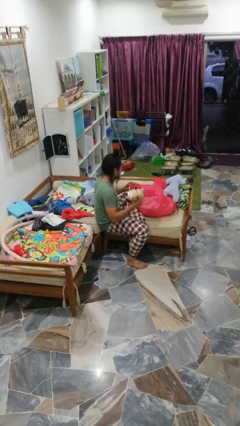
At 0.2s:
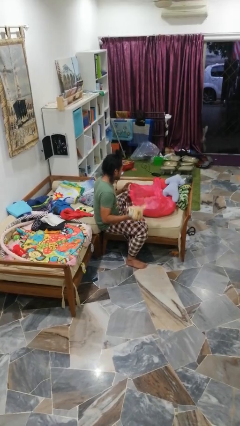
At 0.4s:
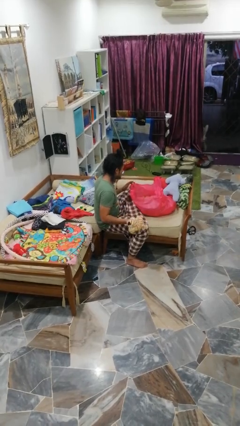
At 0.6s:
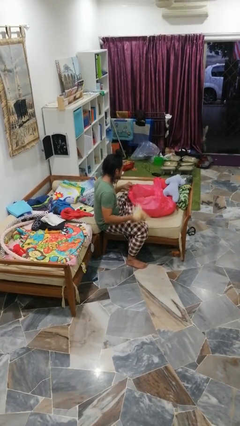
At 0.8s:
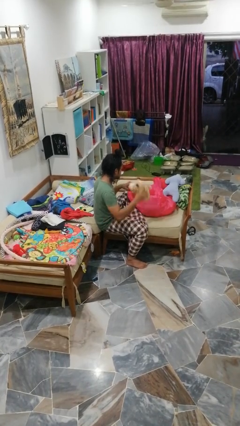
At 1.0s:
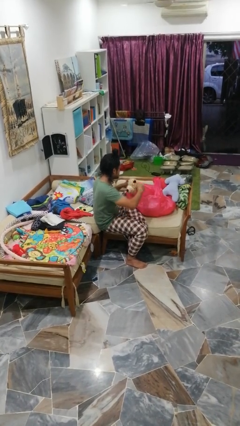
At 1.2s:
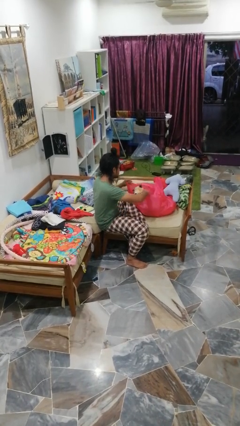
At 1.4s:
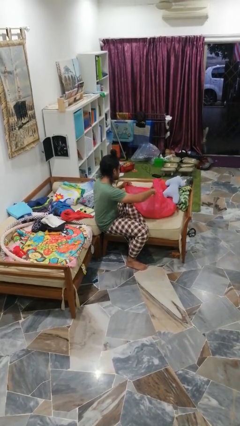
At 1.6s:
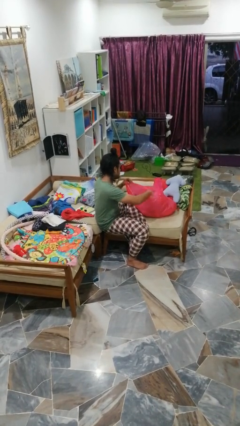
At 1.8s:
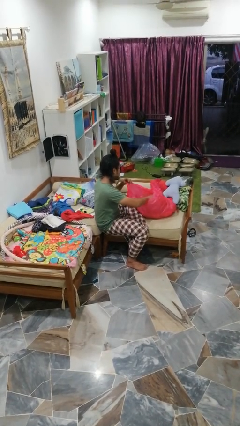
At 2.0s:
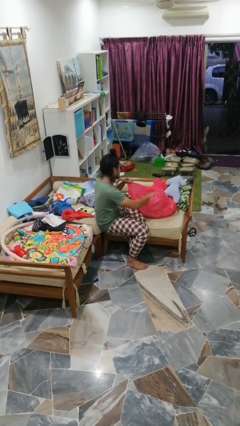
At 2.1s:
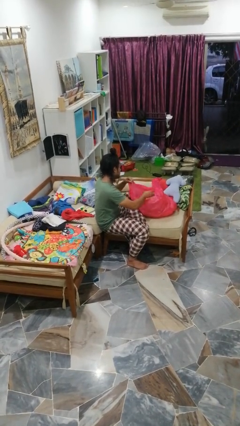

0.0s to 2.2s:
person puts object into bag

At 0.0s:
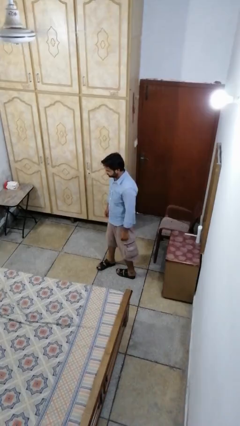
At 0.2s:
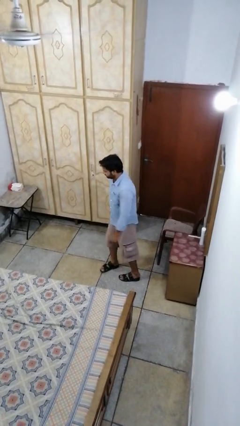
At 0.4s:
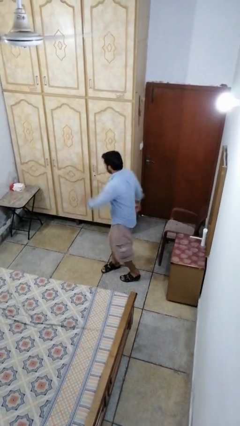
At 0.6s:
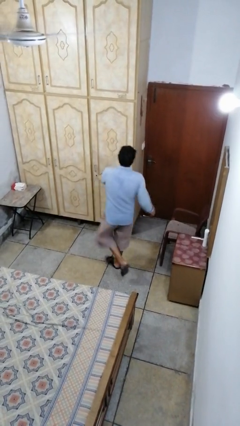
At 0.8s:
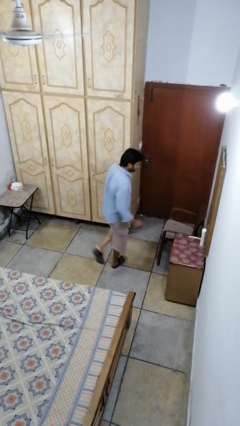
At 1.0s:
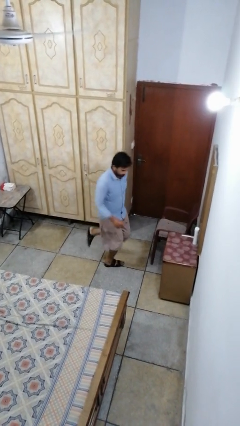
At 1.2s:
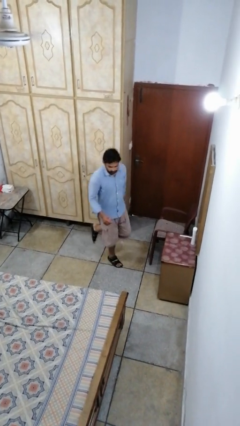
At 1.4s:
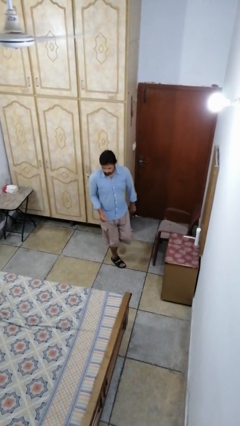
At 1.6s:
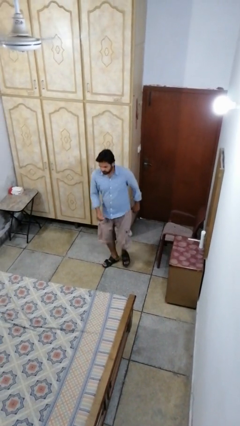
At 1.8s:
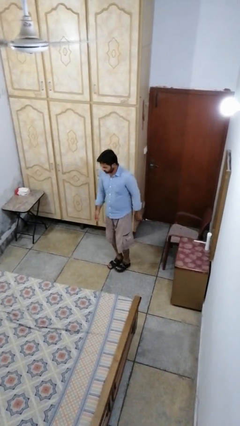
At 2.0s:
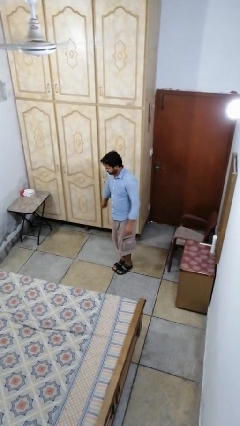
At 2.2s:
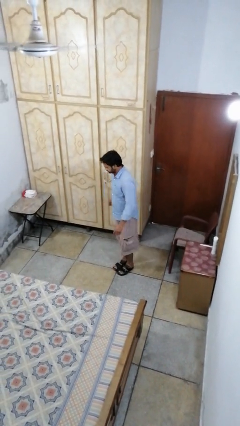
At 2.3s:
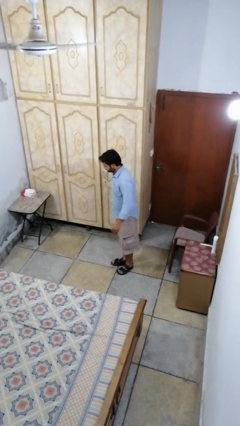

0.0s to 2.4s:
person twirls

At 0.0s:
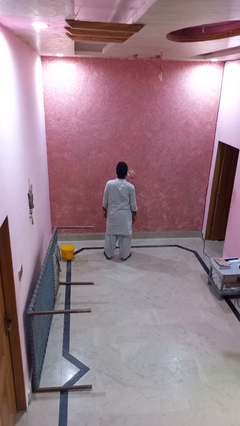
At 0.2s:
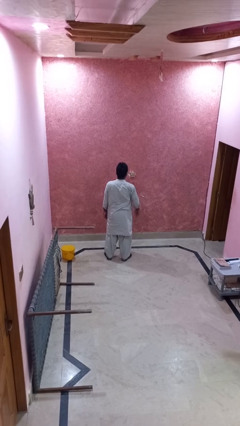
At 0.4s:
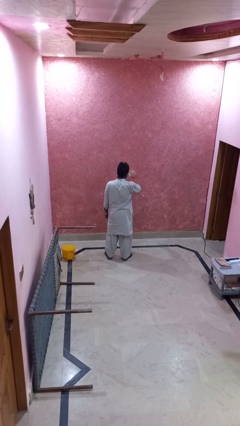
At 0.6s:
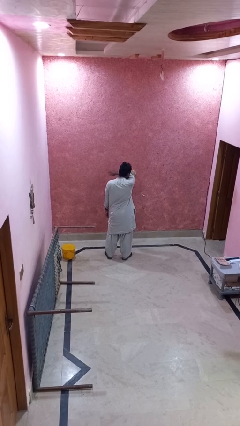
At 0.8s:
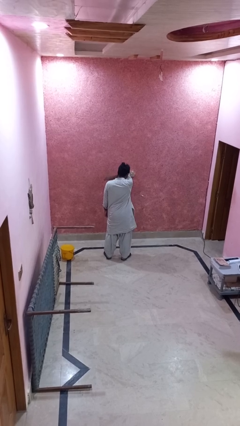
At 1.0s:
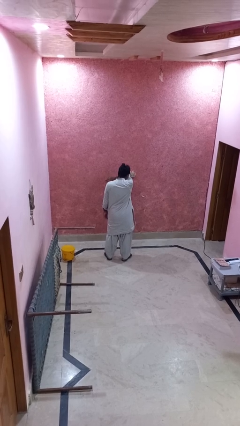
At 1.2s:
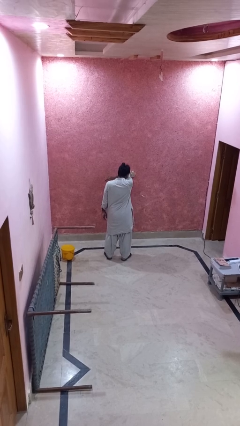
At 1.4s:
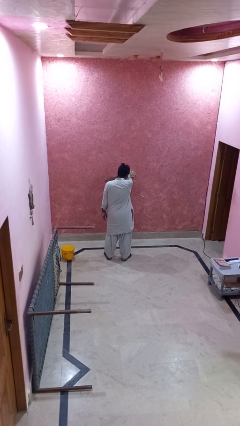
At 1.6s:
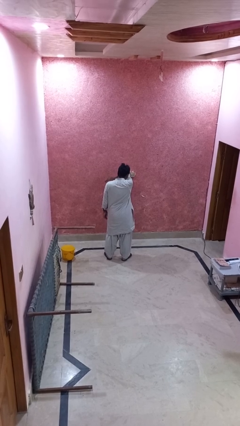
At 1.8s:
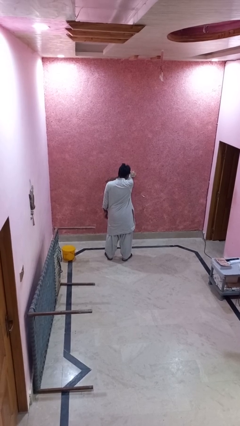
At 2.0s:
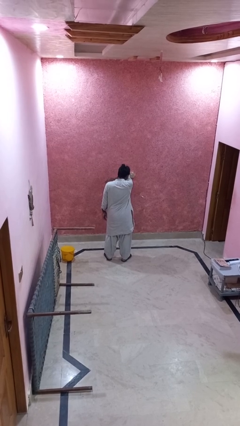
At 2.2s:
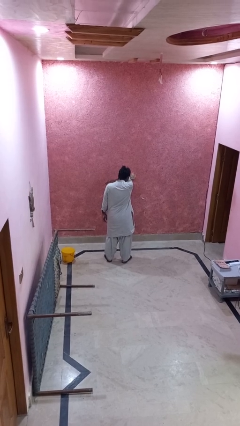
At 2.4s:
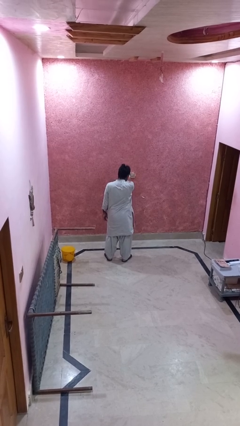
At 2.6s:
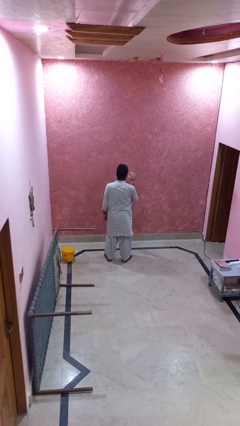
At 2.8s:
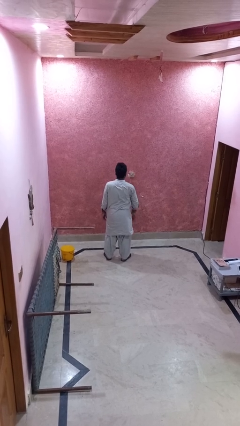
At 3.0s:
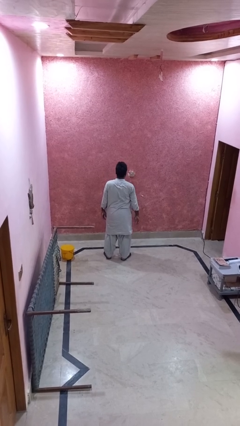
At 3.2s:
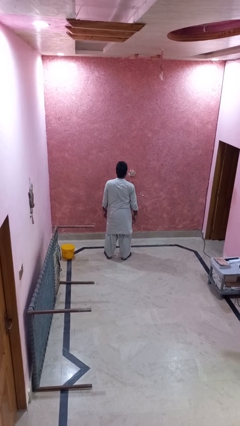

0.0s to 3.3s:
person sneezes into arm

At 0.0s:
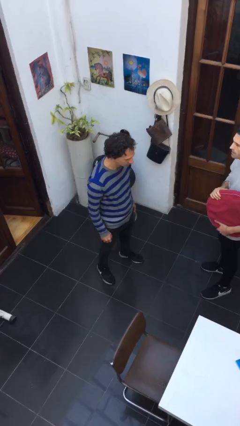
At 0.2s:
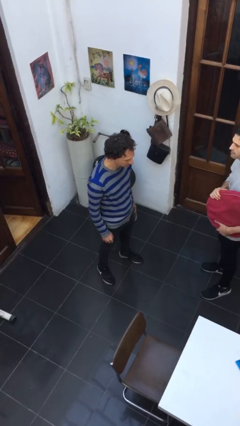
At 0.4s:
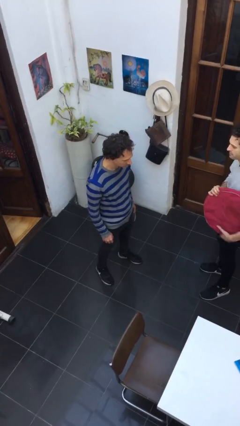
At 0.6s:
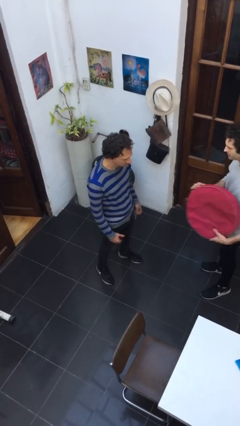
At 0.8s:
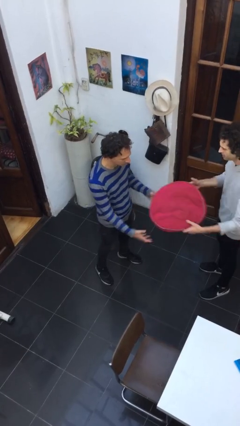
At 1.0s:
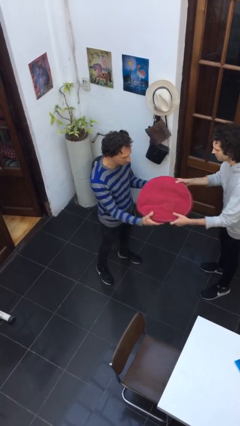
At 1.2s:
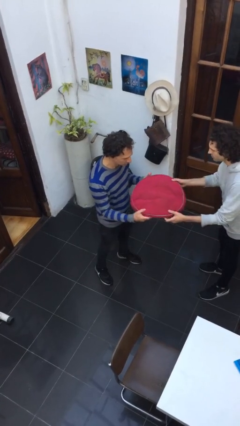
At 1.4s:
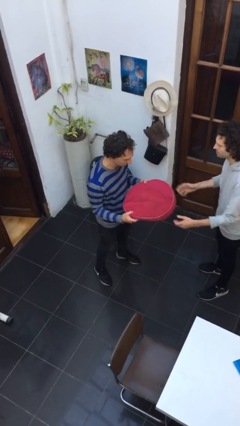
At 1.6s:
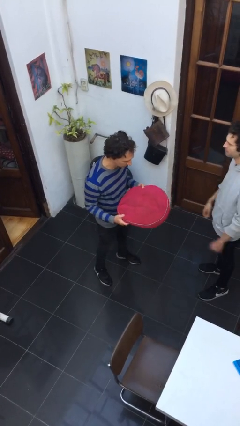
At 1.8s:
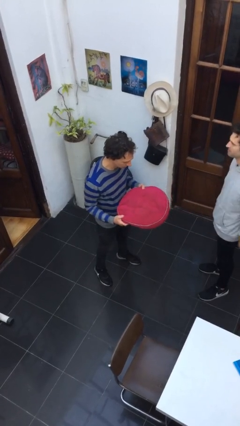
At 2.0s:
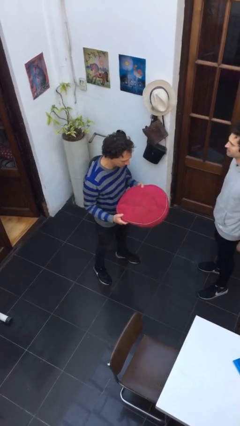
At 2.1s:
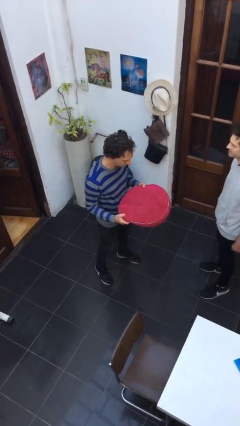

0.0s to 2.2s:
person transfers object to person

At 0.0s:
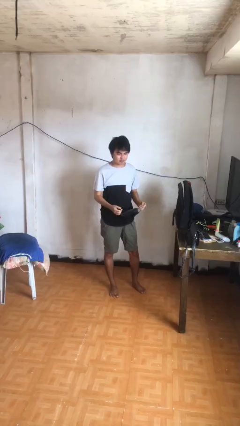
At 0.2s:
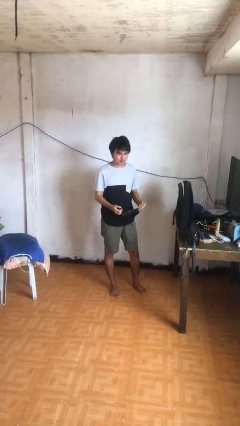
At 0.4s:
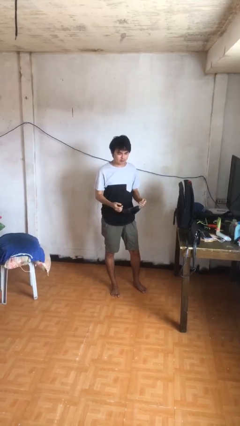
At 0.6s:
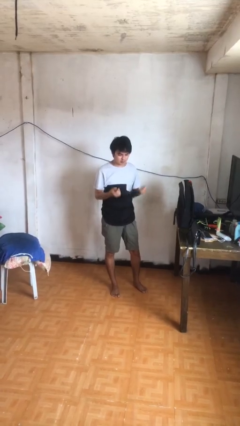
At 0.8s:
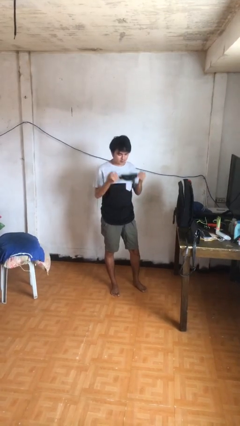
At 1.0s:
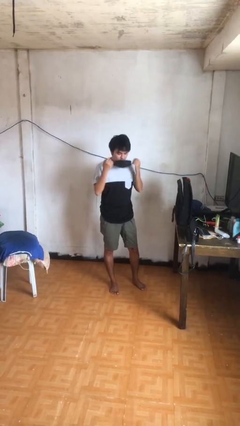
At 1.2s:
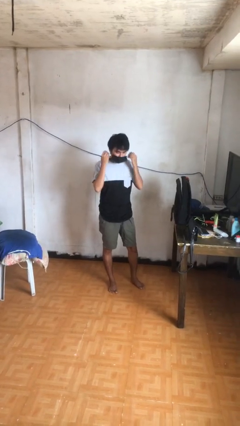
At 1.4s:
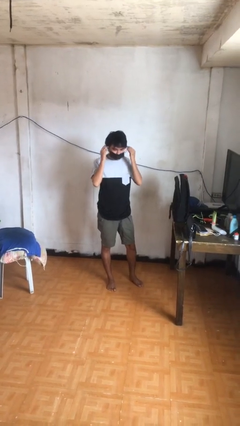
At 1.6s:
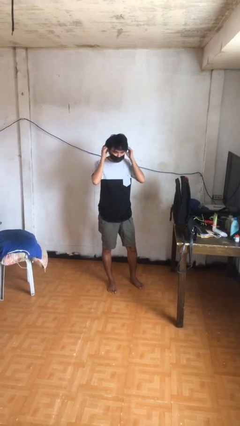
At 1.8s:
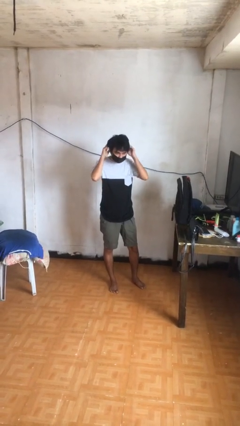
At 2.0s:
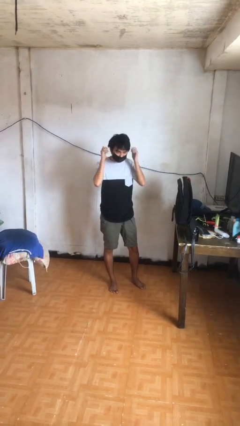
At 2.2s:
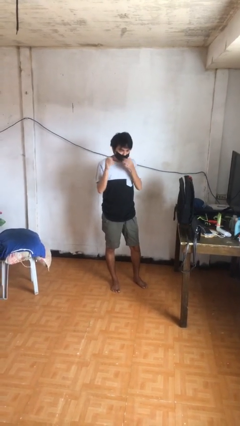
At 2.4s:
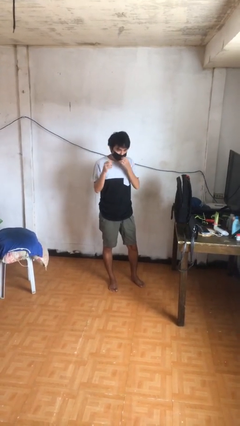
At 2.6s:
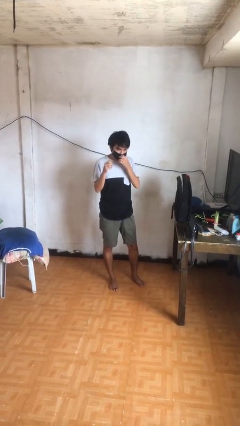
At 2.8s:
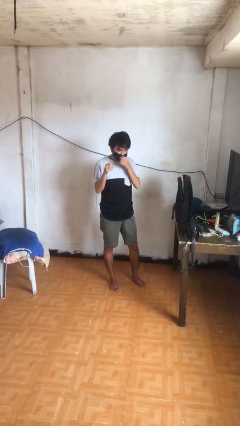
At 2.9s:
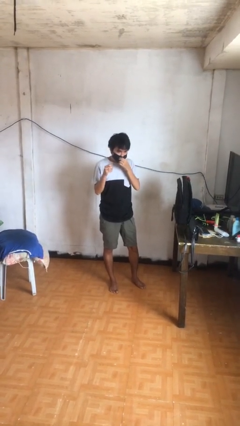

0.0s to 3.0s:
person puts on facemask

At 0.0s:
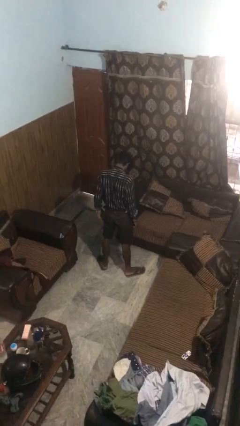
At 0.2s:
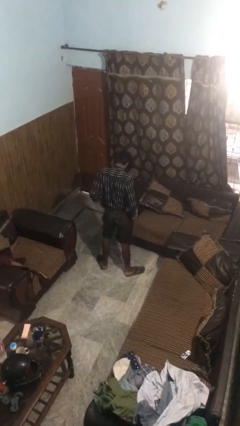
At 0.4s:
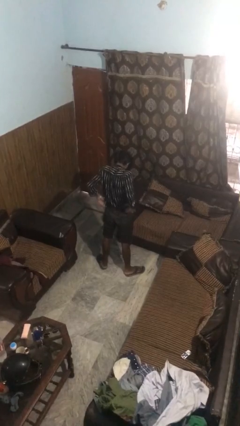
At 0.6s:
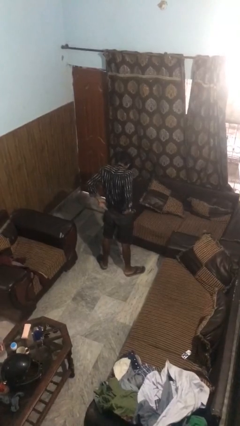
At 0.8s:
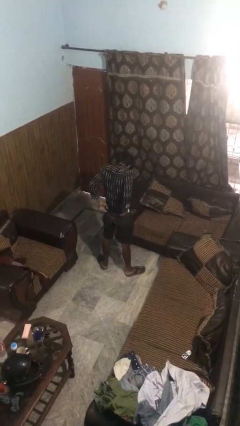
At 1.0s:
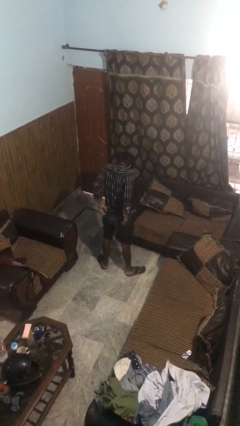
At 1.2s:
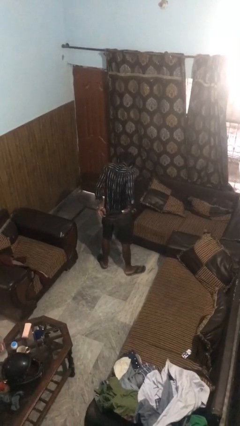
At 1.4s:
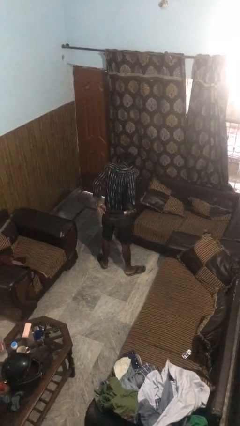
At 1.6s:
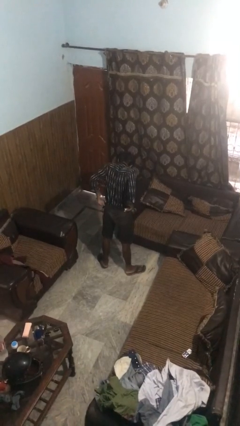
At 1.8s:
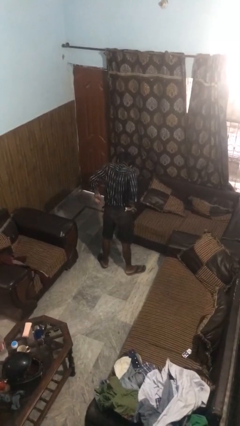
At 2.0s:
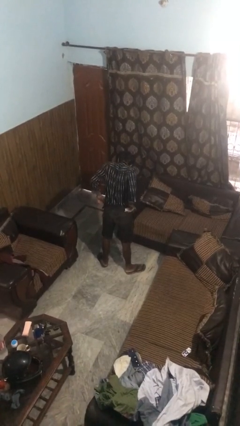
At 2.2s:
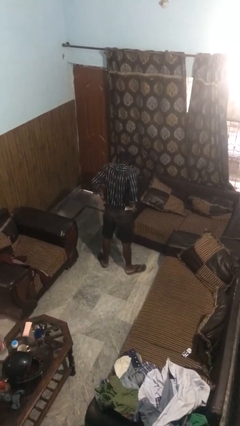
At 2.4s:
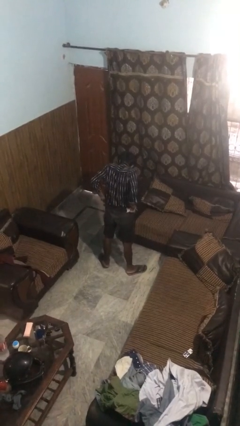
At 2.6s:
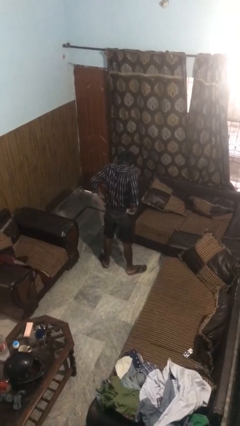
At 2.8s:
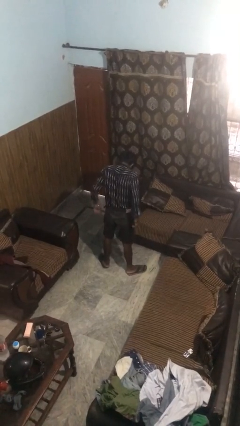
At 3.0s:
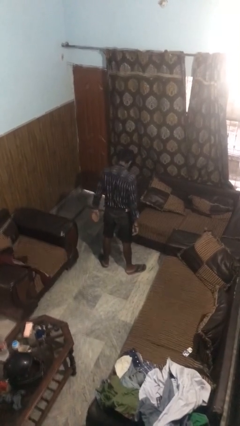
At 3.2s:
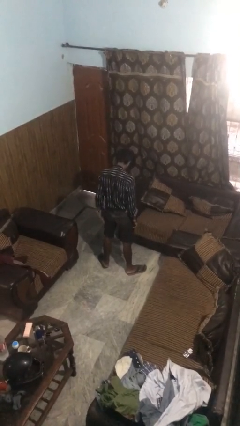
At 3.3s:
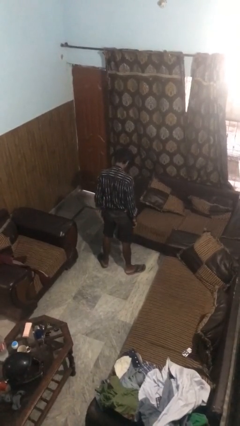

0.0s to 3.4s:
person hikes up pants

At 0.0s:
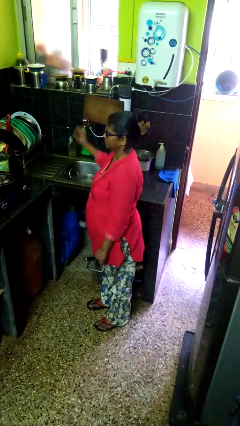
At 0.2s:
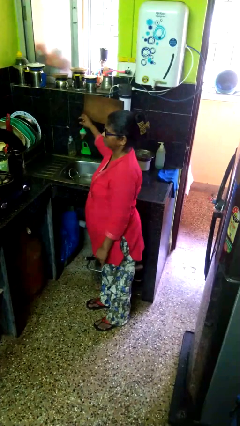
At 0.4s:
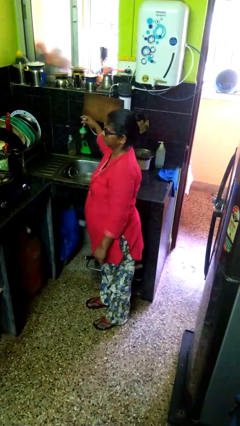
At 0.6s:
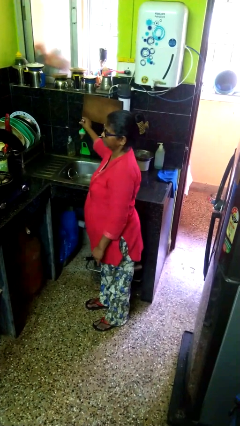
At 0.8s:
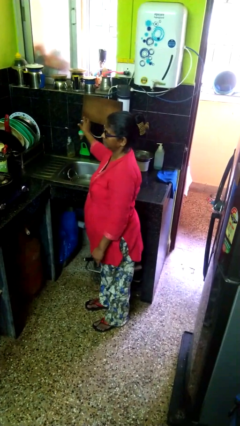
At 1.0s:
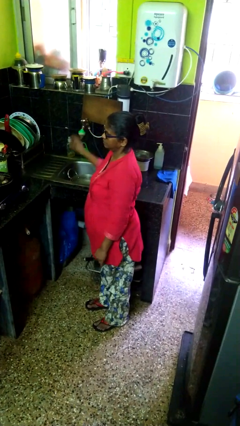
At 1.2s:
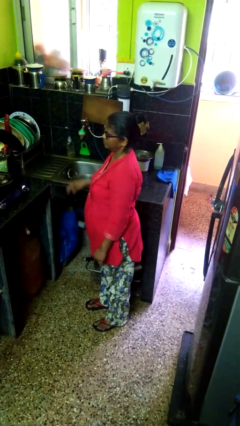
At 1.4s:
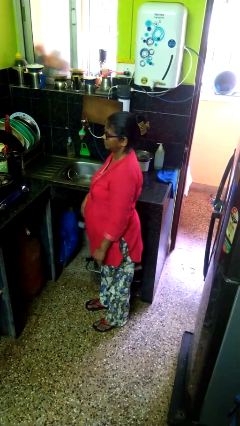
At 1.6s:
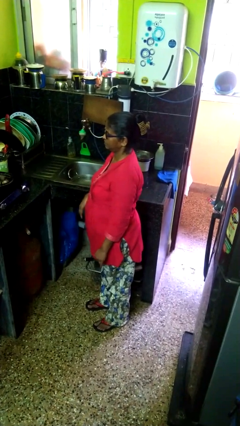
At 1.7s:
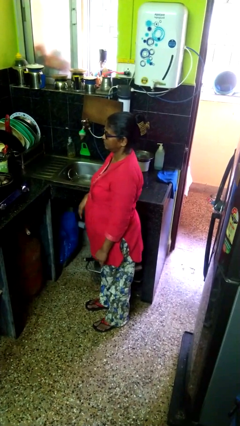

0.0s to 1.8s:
person turns off faucet
